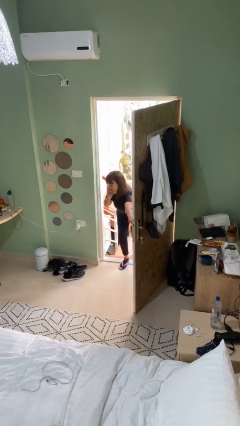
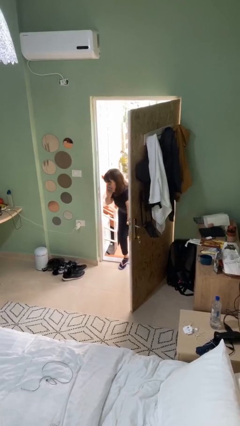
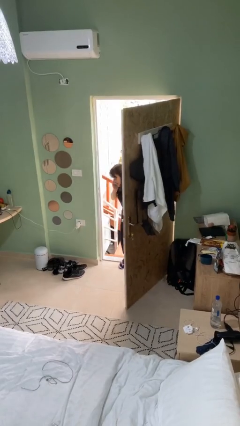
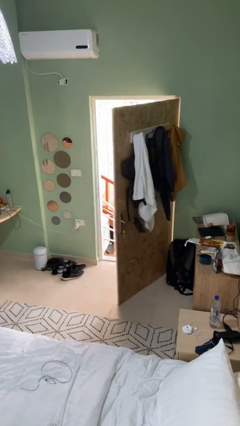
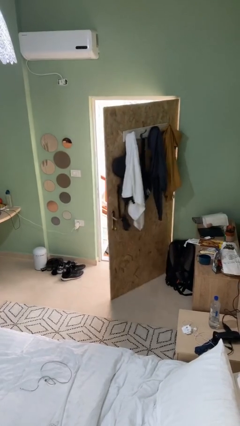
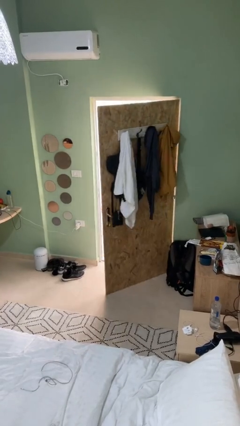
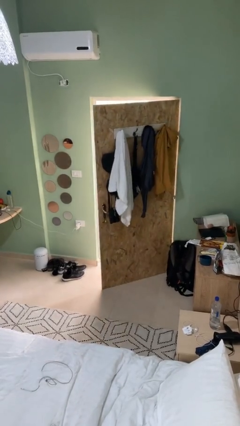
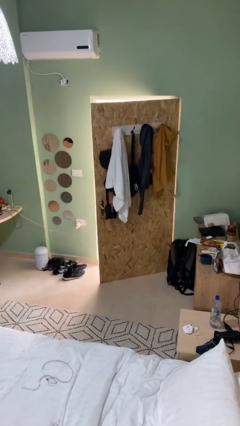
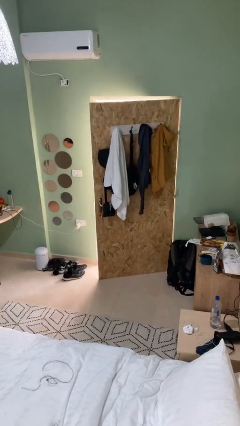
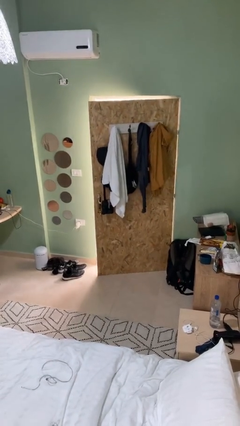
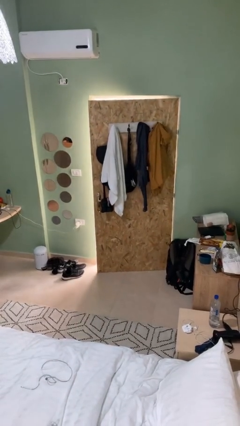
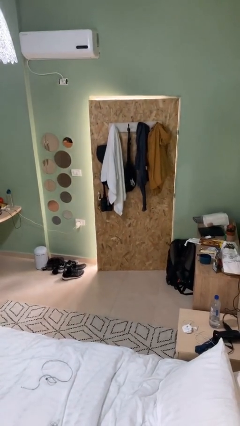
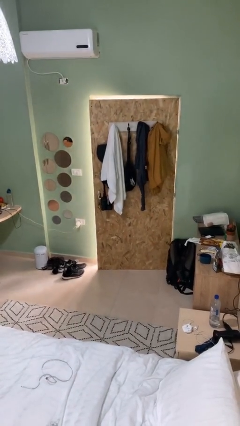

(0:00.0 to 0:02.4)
person closes facility door

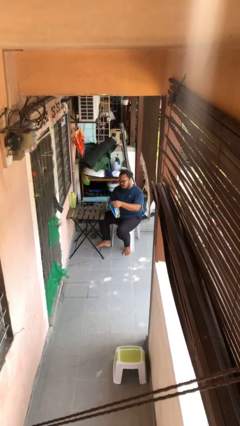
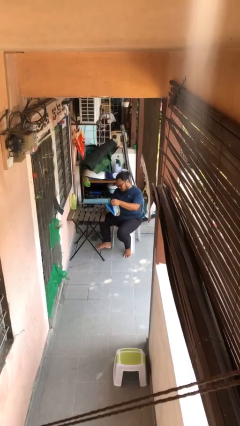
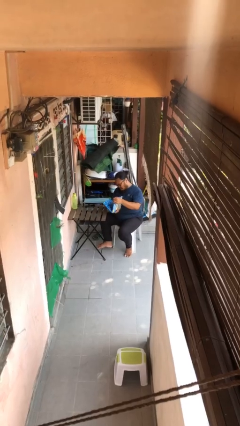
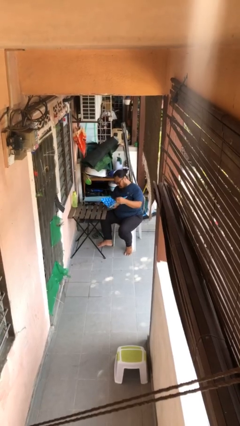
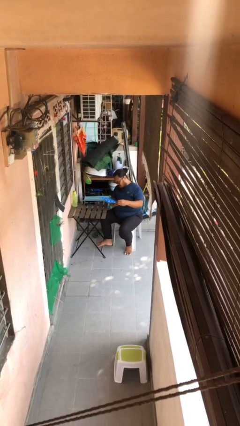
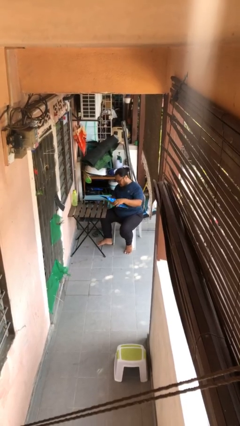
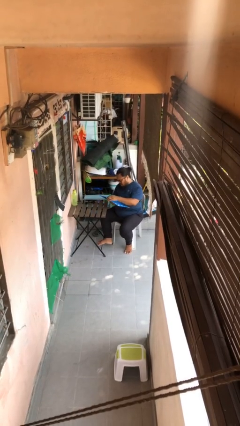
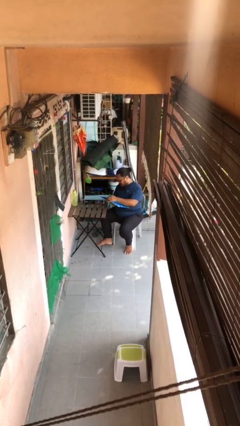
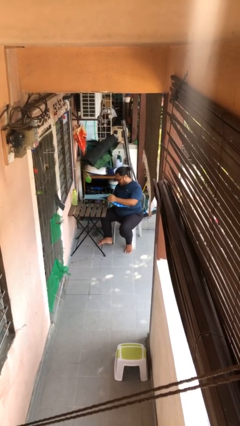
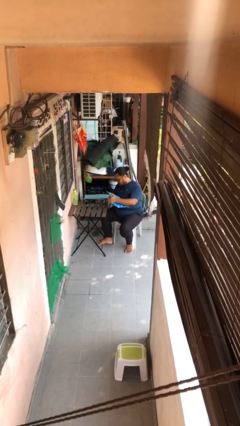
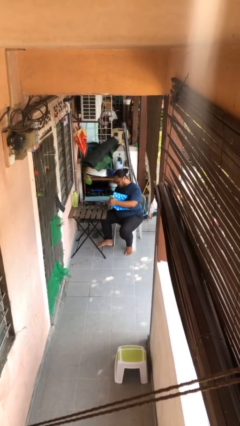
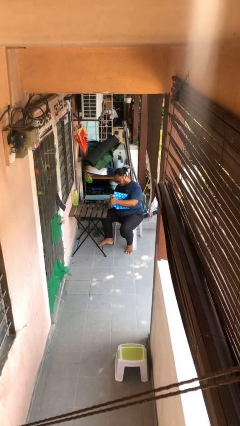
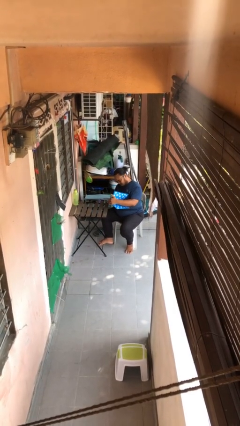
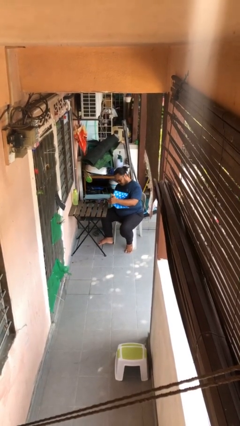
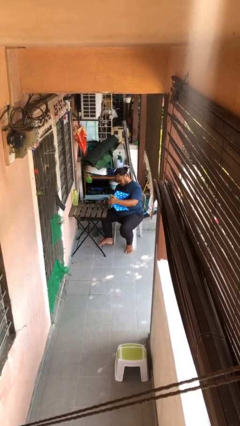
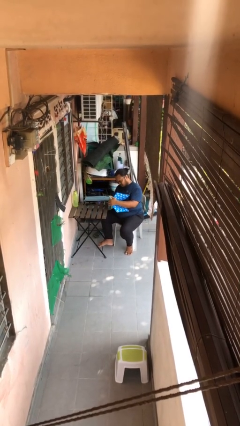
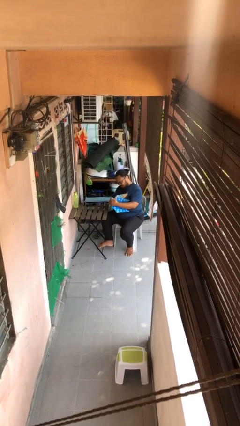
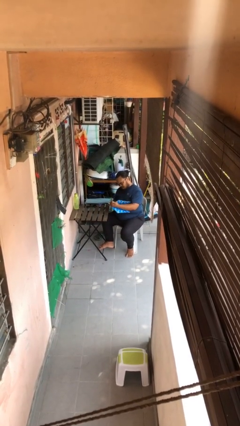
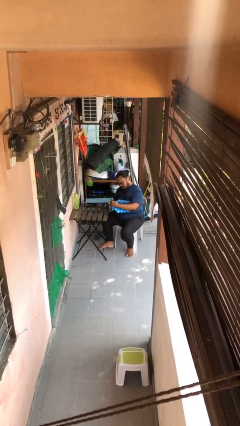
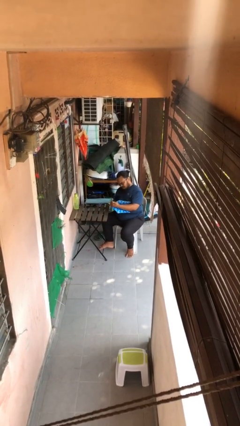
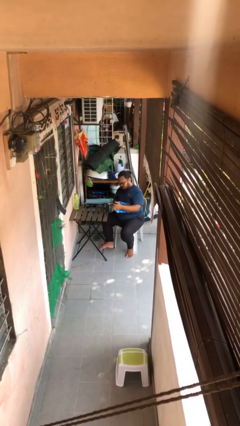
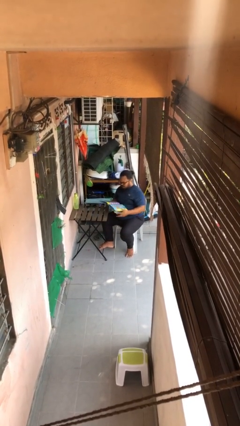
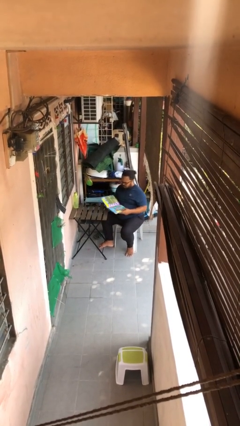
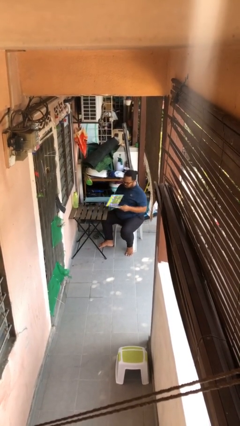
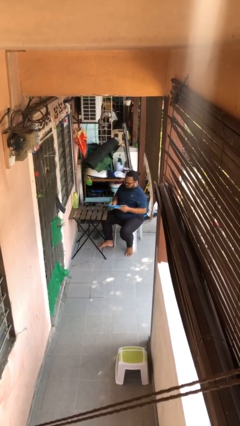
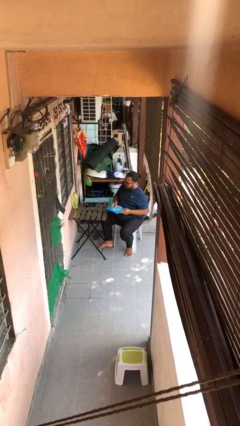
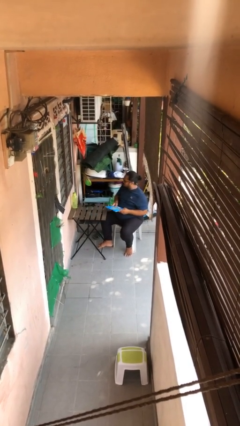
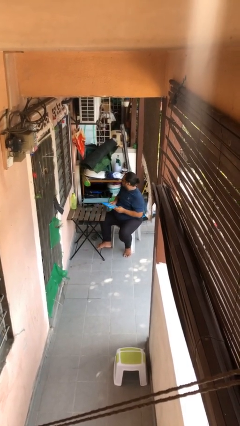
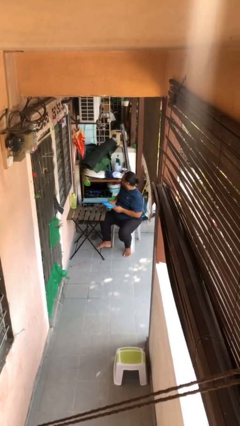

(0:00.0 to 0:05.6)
person reads document

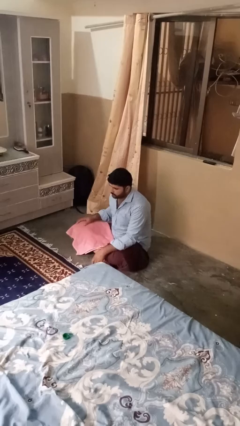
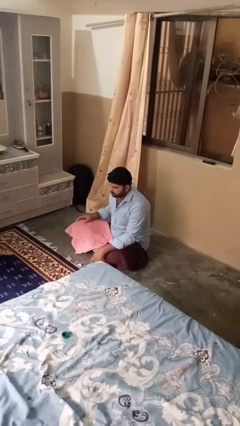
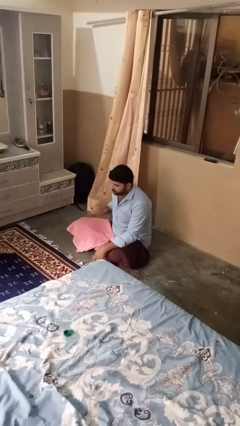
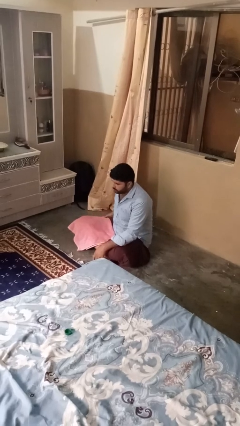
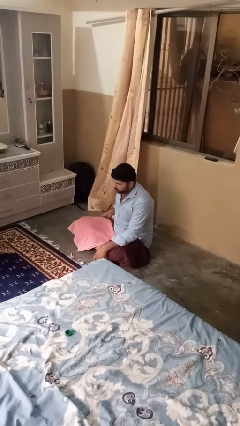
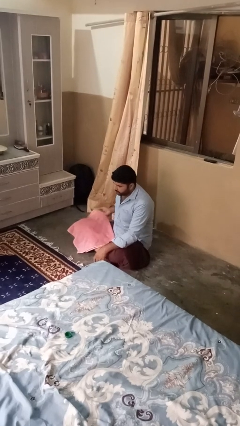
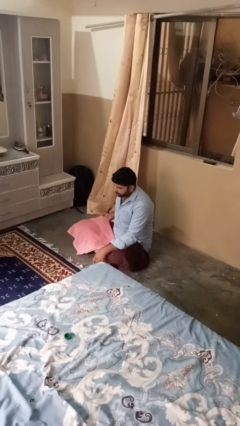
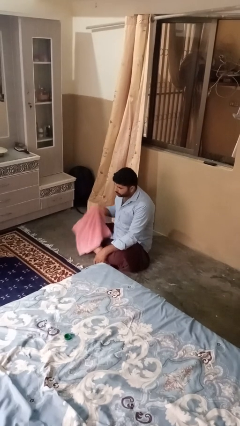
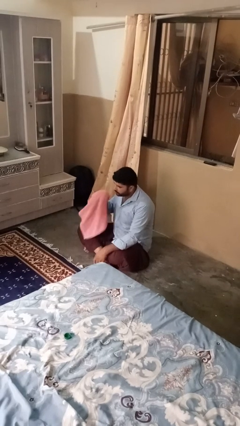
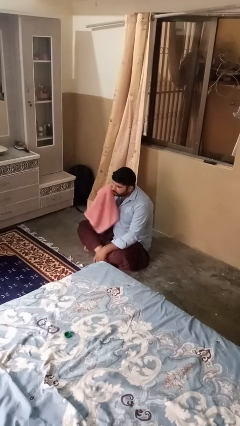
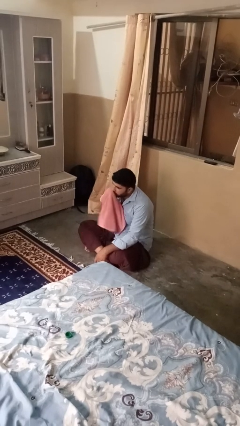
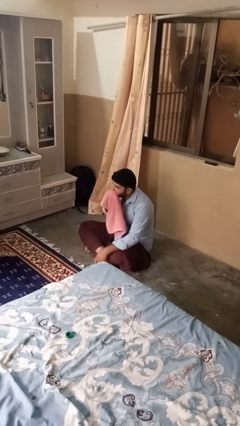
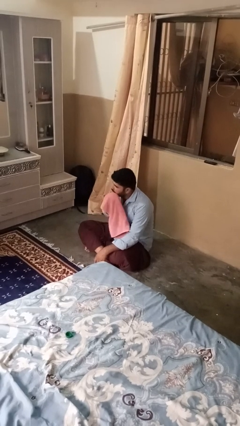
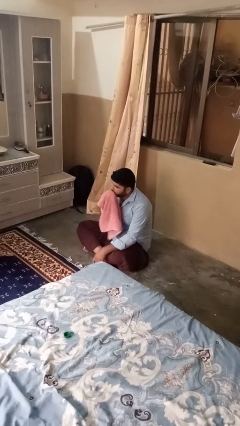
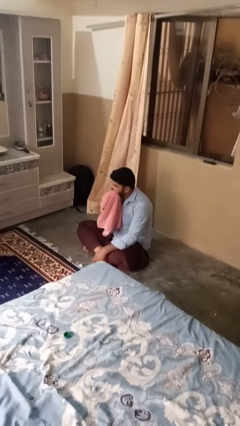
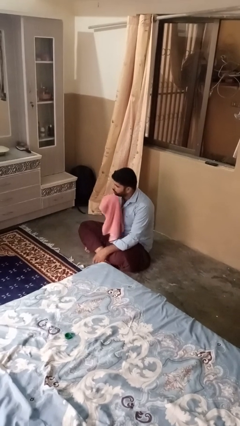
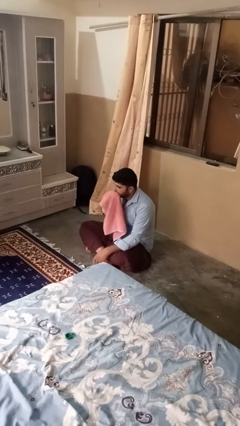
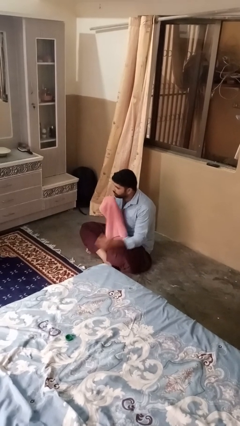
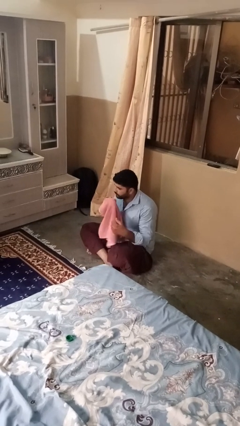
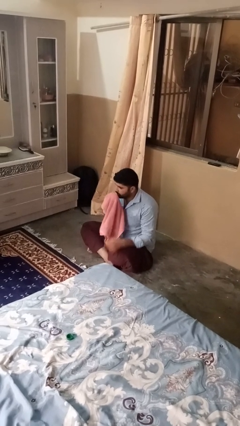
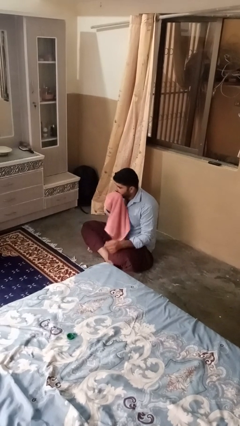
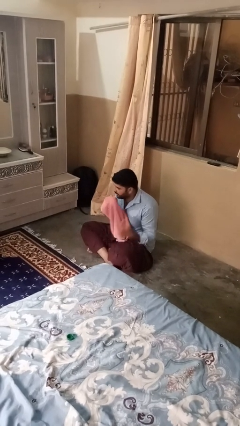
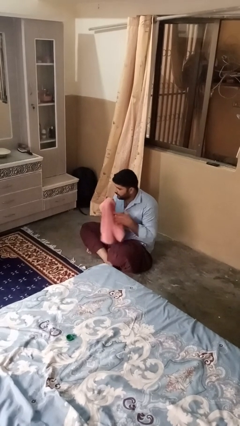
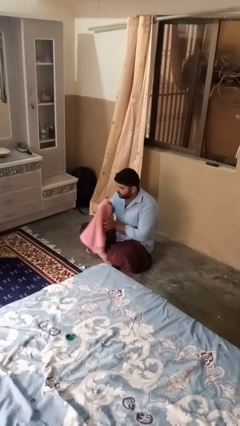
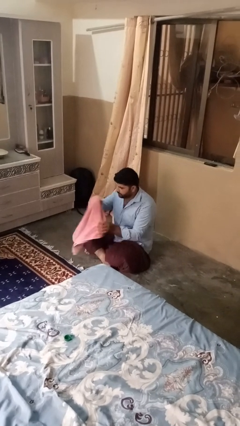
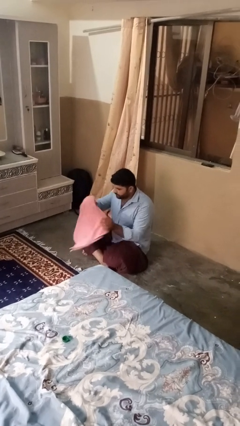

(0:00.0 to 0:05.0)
person wipes mouth with napkin

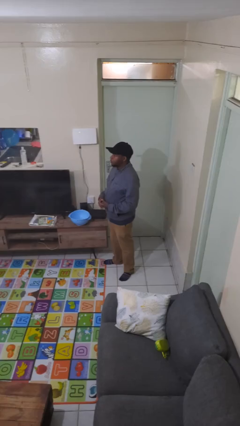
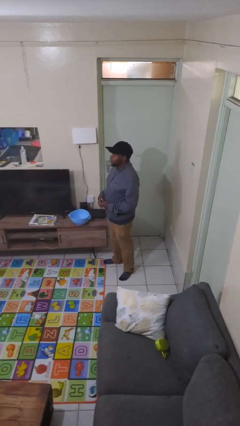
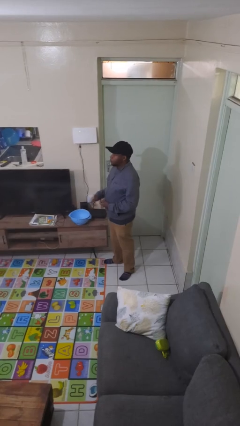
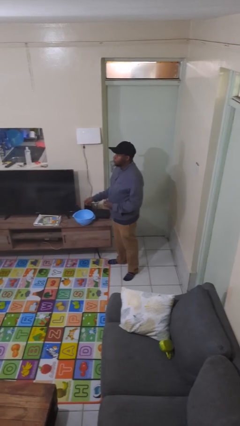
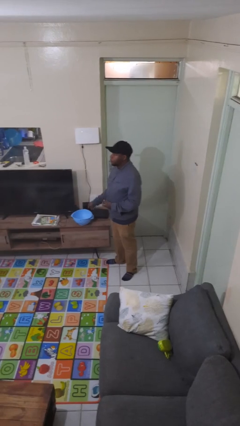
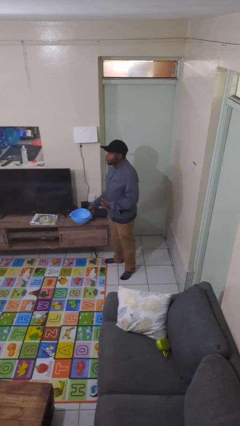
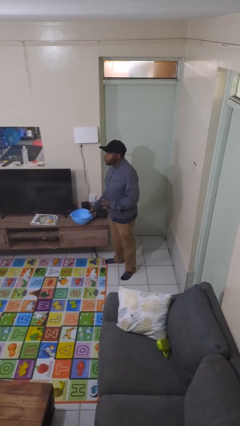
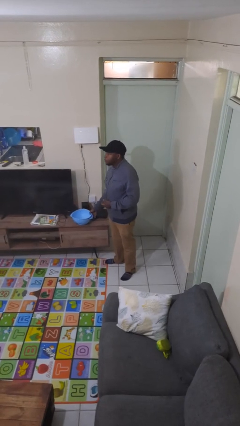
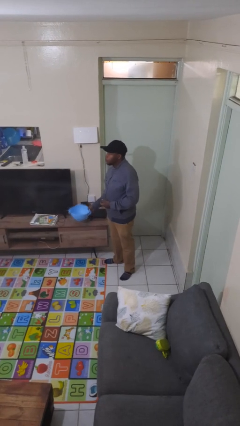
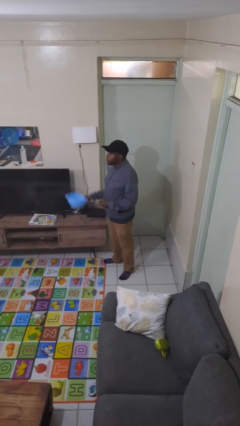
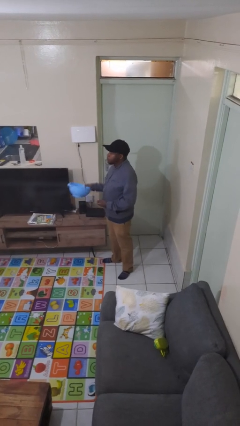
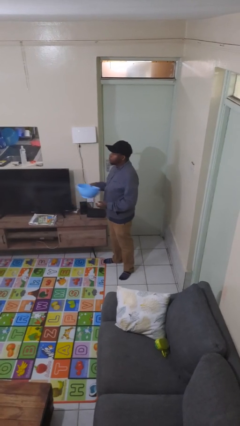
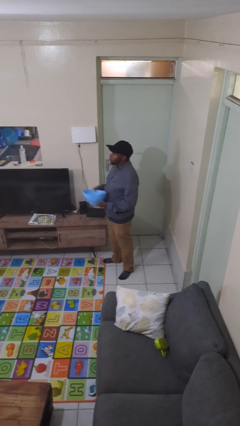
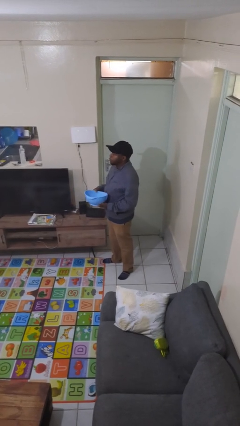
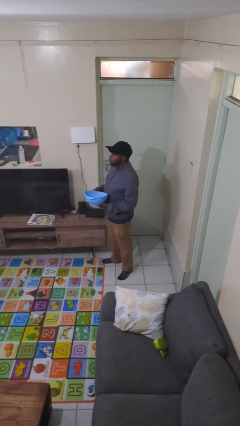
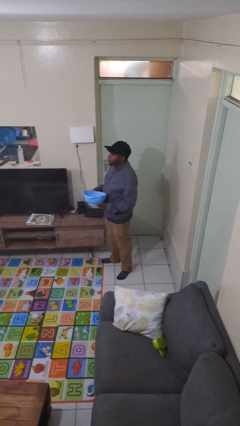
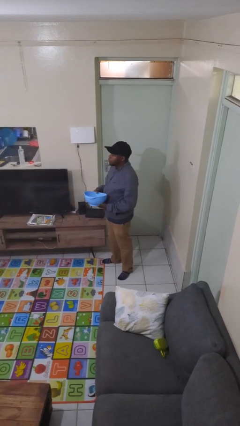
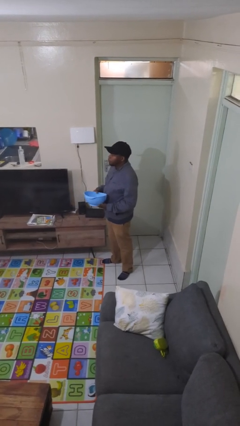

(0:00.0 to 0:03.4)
person picks up object from countertop

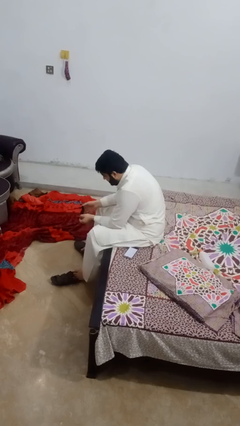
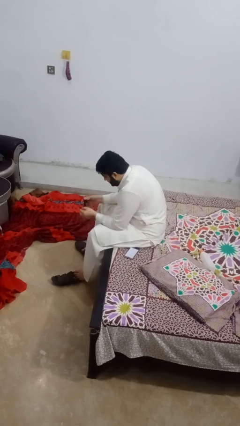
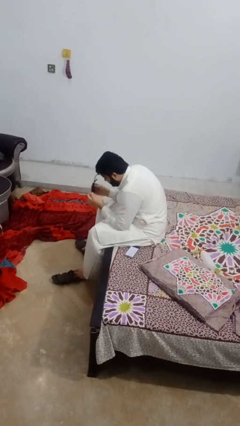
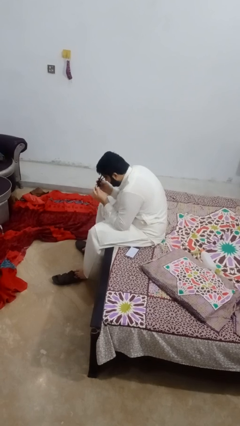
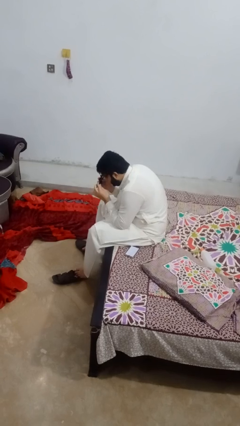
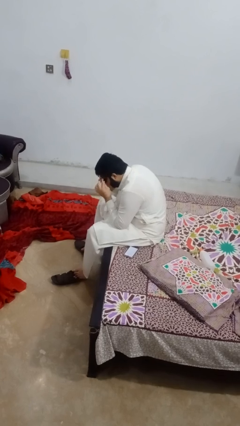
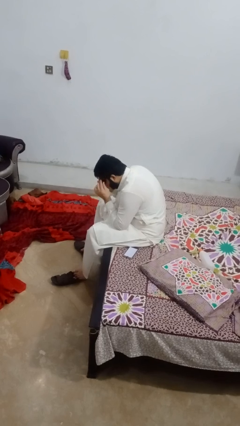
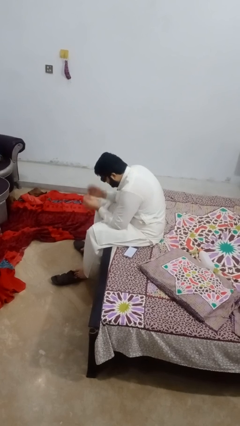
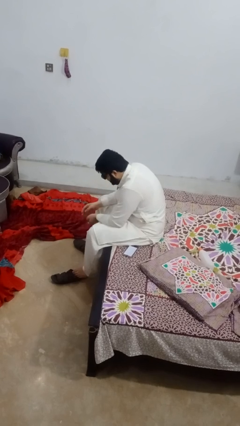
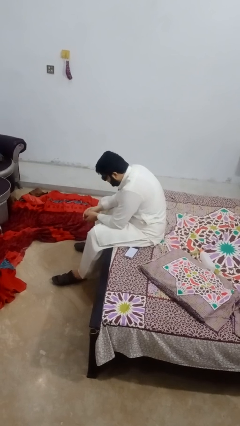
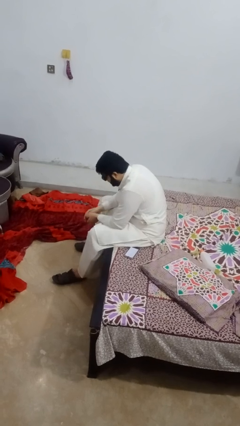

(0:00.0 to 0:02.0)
person puts on glasses
